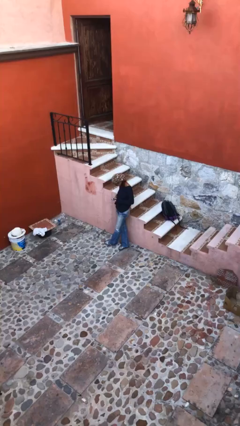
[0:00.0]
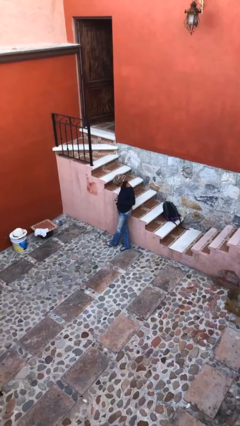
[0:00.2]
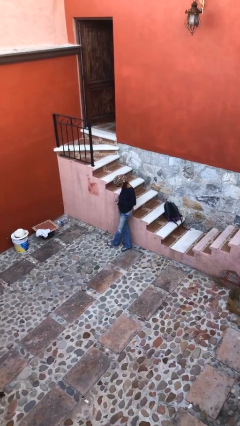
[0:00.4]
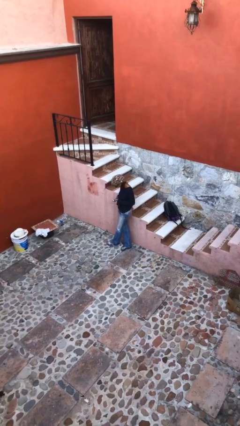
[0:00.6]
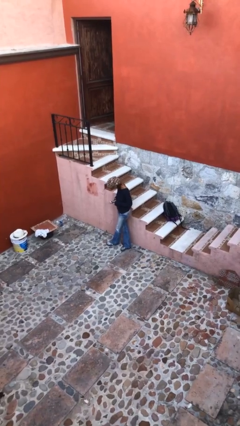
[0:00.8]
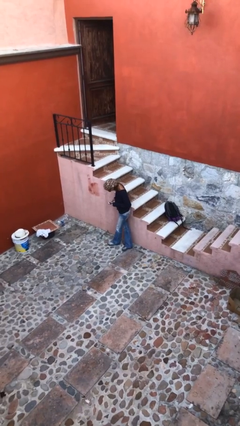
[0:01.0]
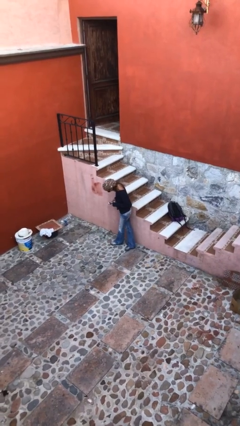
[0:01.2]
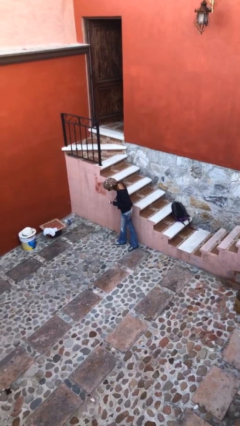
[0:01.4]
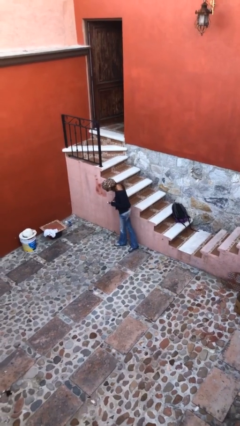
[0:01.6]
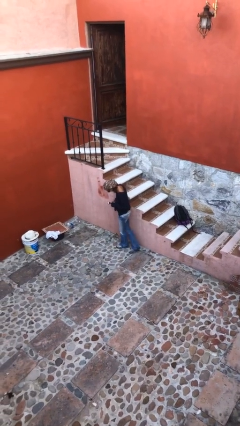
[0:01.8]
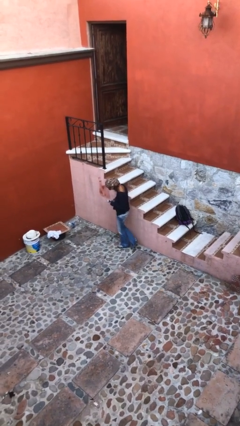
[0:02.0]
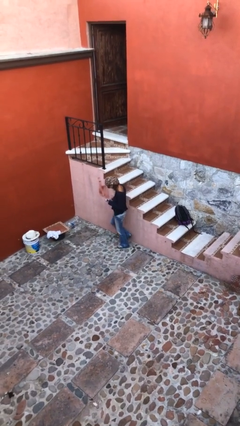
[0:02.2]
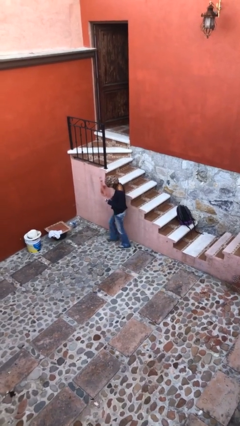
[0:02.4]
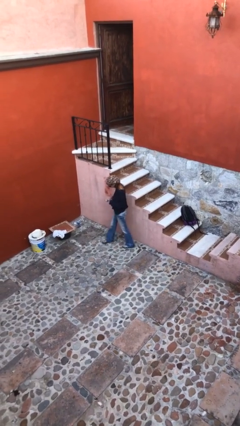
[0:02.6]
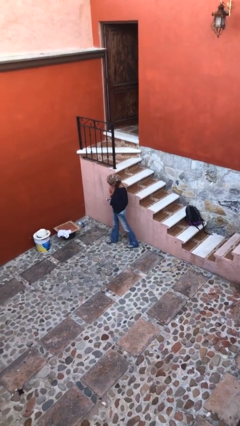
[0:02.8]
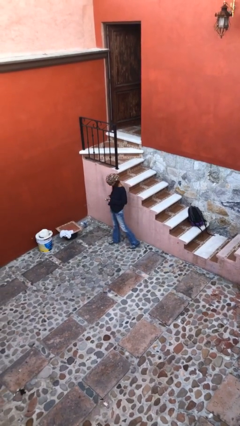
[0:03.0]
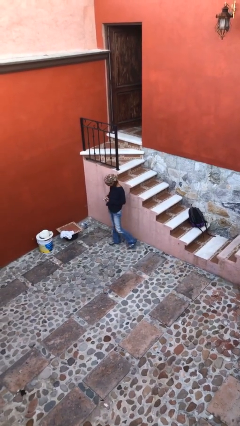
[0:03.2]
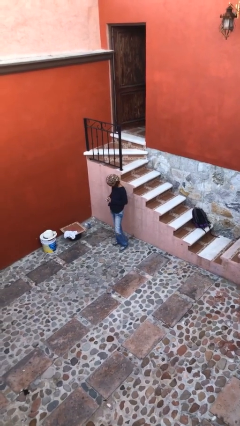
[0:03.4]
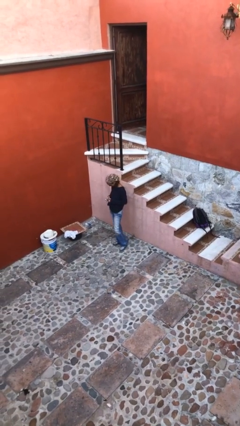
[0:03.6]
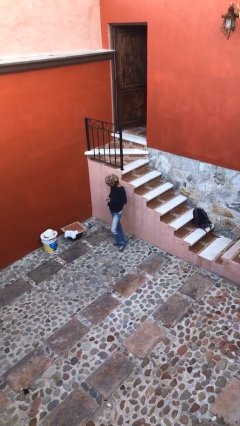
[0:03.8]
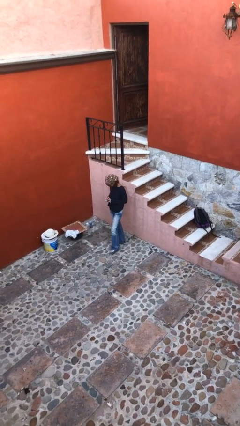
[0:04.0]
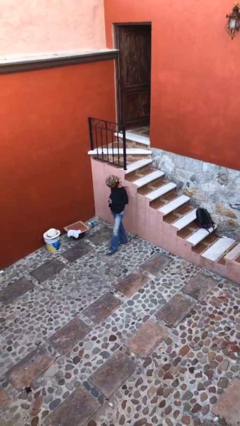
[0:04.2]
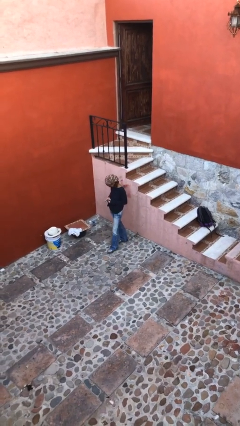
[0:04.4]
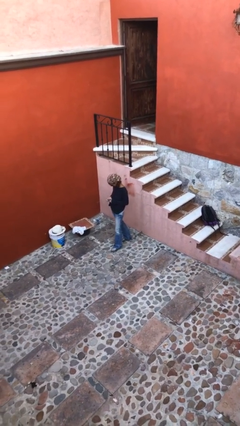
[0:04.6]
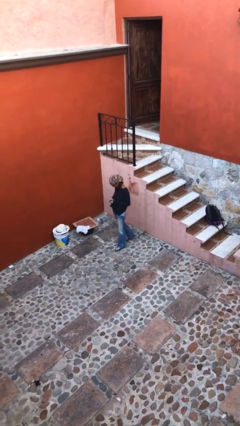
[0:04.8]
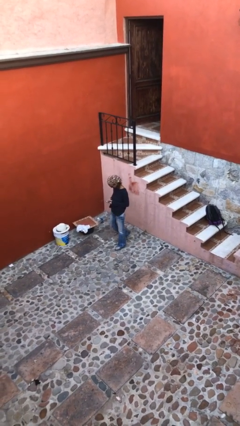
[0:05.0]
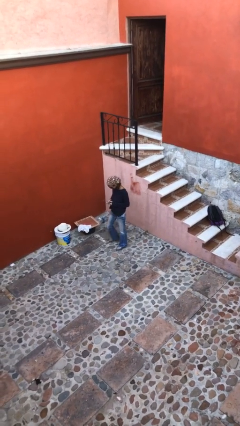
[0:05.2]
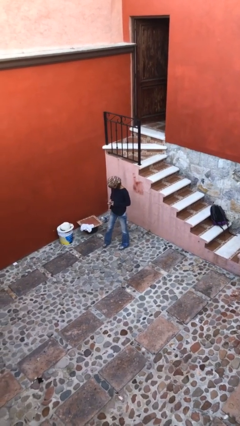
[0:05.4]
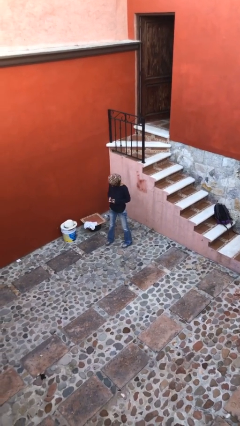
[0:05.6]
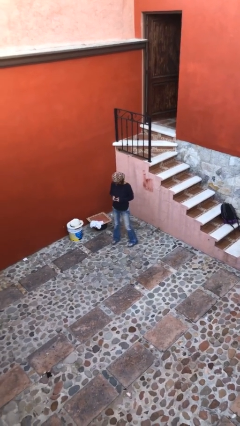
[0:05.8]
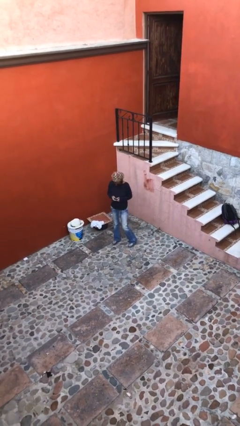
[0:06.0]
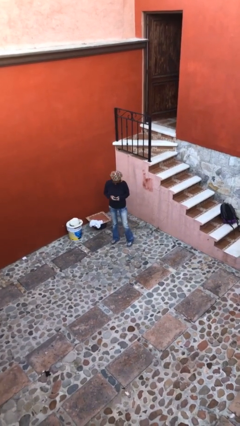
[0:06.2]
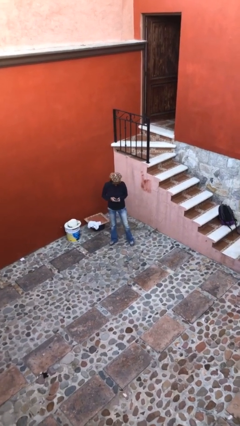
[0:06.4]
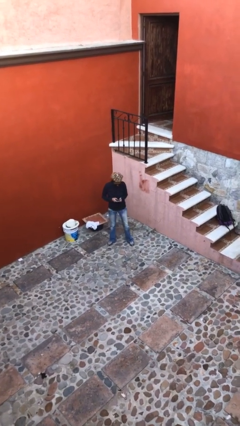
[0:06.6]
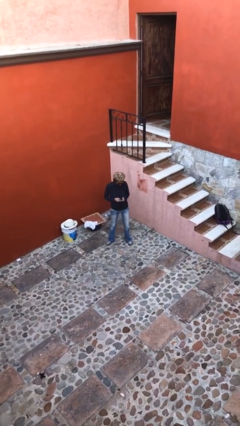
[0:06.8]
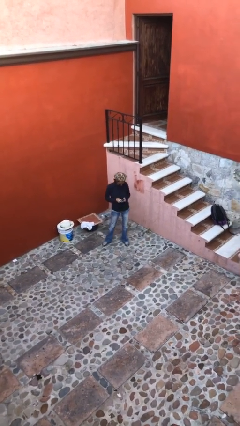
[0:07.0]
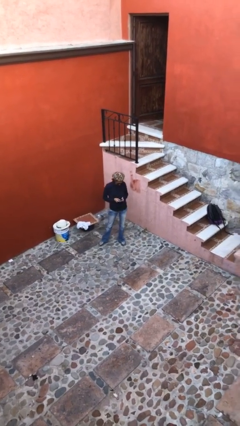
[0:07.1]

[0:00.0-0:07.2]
person texts on phone

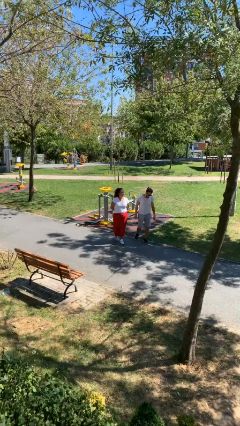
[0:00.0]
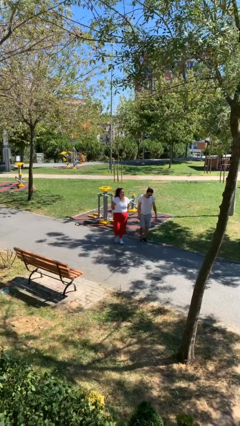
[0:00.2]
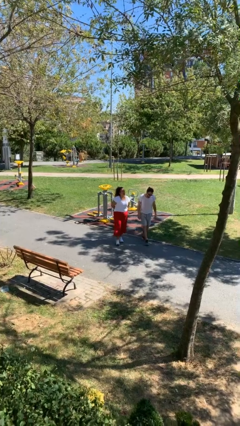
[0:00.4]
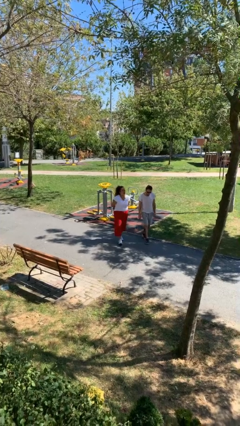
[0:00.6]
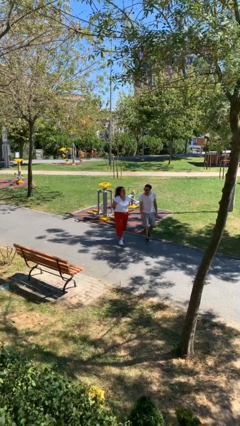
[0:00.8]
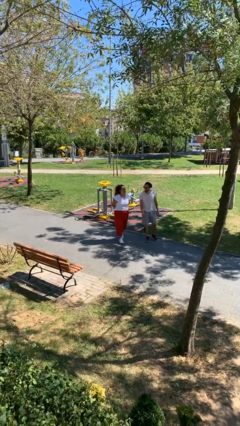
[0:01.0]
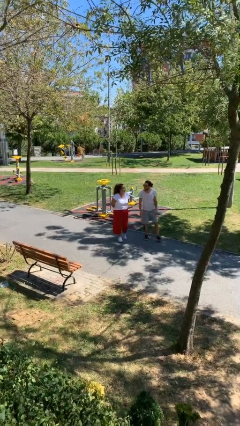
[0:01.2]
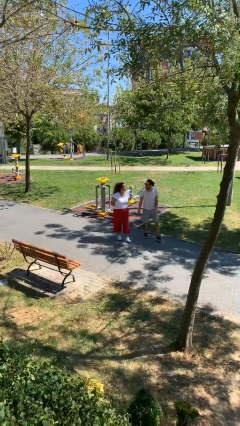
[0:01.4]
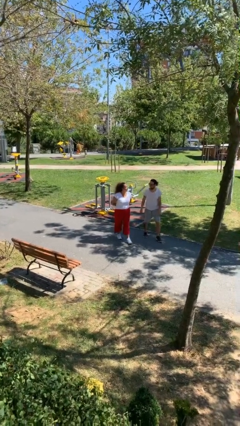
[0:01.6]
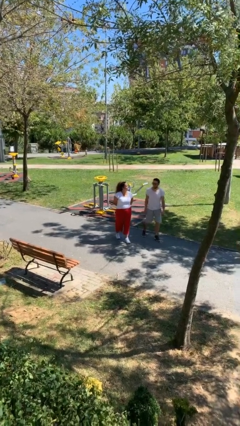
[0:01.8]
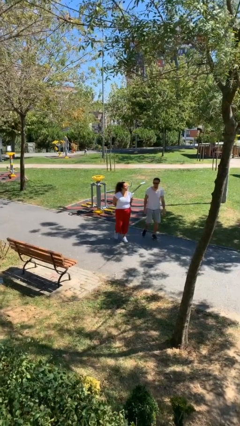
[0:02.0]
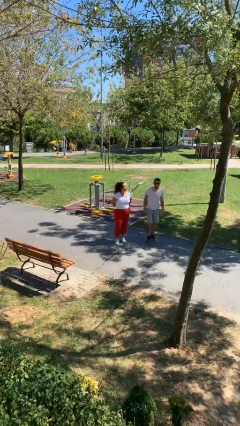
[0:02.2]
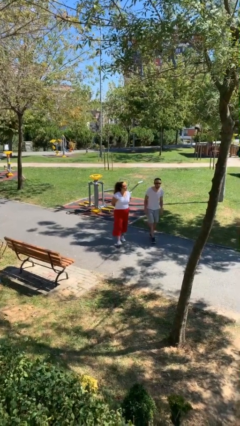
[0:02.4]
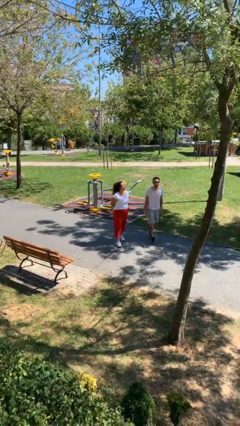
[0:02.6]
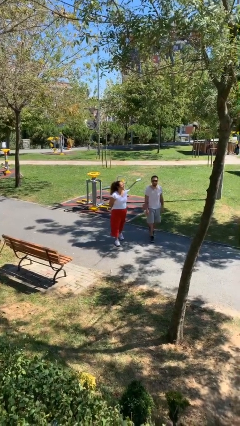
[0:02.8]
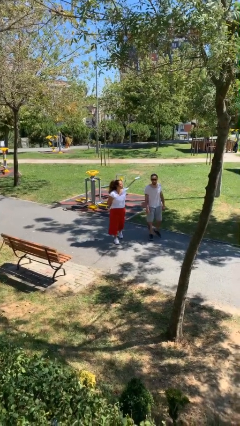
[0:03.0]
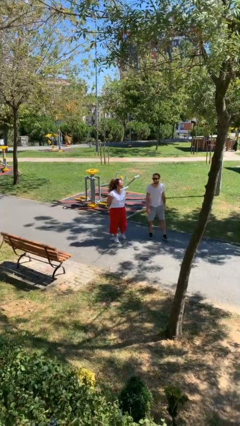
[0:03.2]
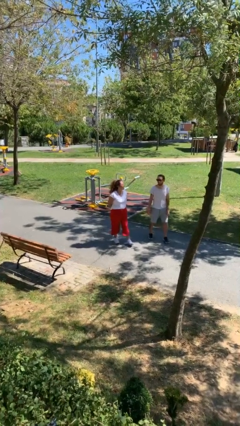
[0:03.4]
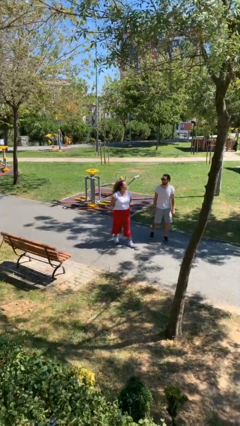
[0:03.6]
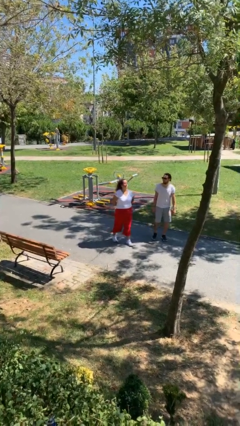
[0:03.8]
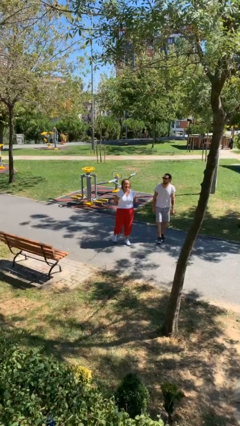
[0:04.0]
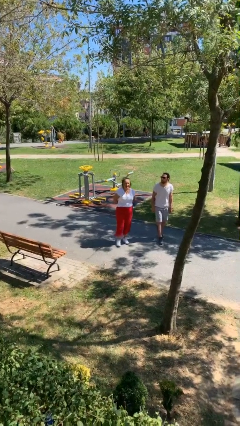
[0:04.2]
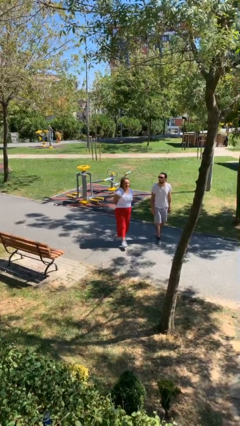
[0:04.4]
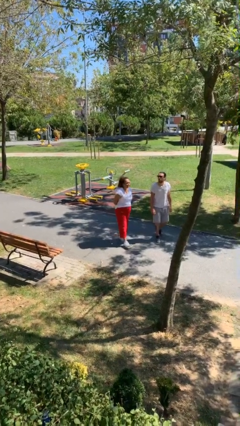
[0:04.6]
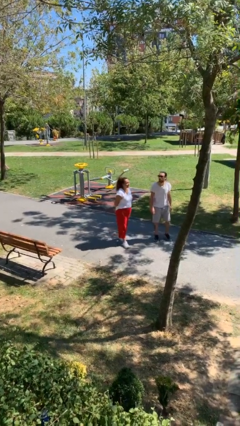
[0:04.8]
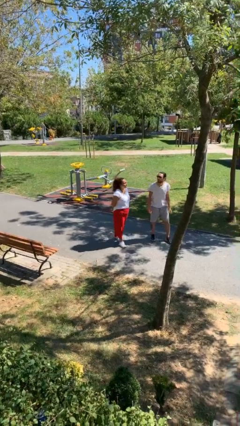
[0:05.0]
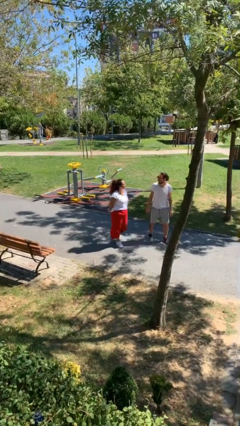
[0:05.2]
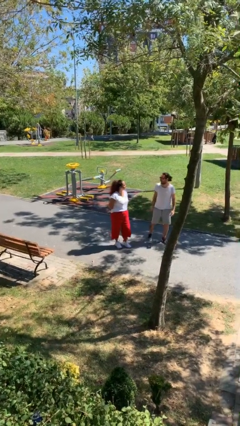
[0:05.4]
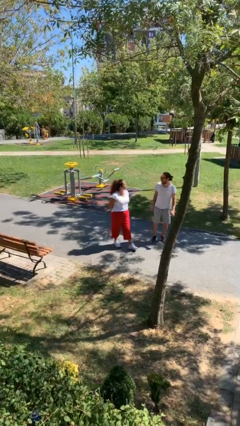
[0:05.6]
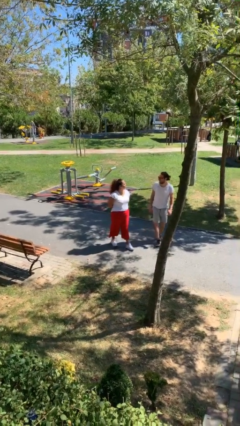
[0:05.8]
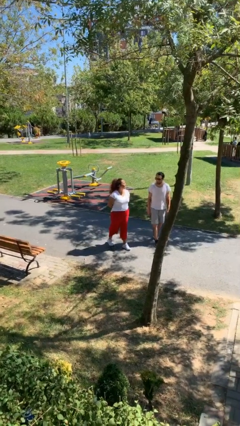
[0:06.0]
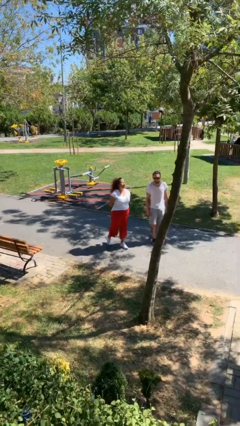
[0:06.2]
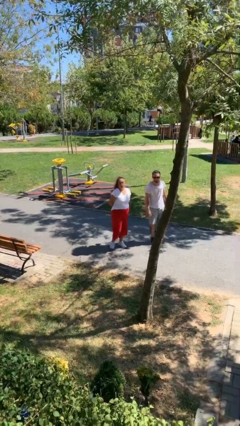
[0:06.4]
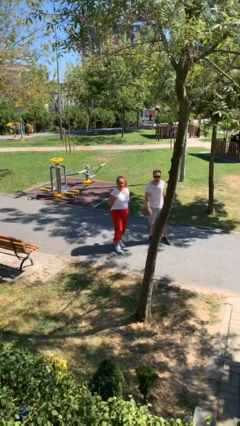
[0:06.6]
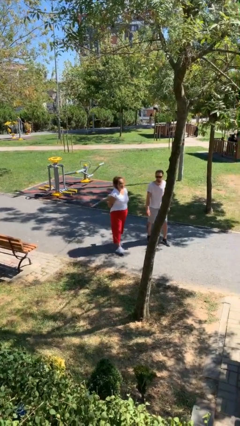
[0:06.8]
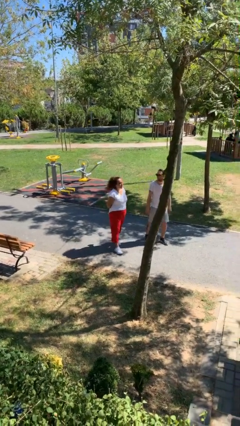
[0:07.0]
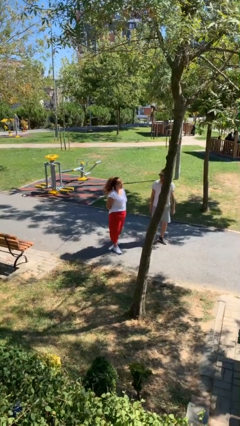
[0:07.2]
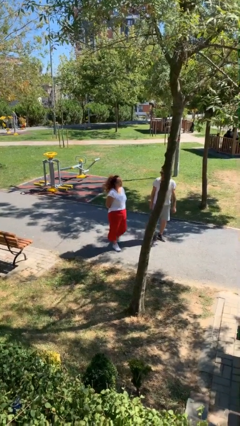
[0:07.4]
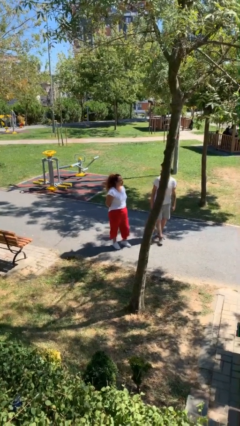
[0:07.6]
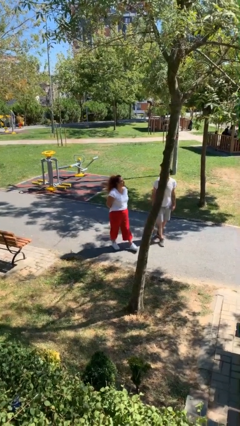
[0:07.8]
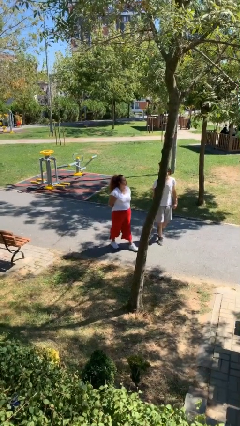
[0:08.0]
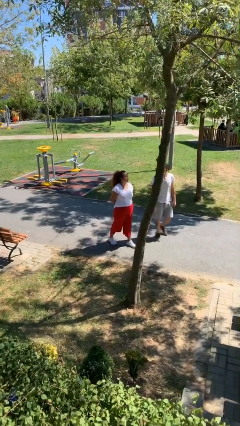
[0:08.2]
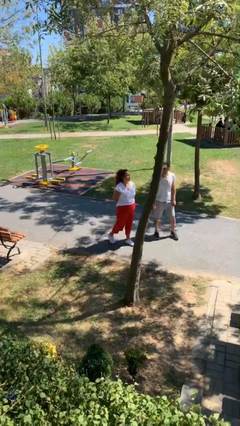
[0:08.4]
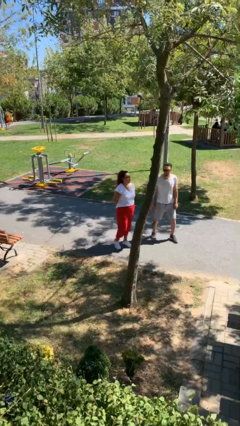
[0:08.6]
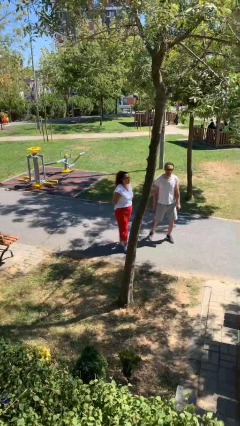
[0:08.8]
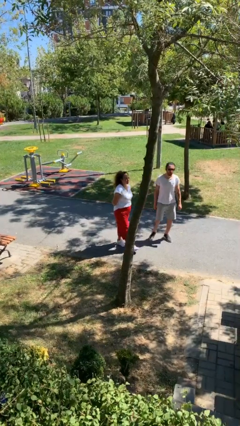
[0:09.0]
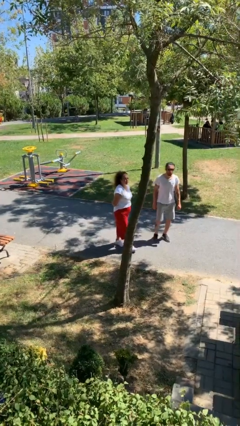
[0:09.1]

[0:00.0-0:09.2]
person talks to person

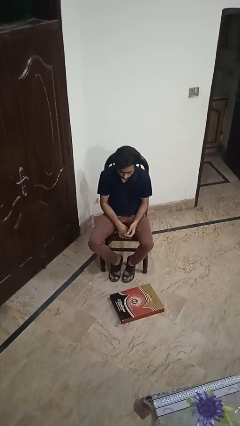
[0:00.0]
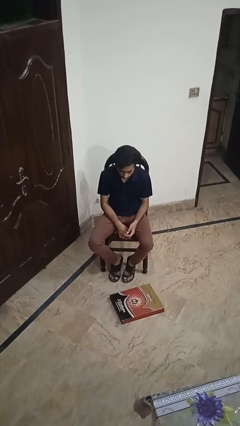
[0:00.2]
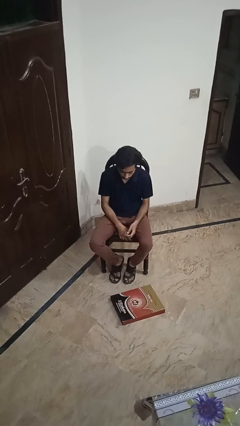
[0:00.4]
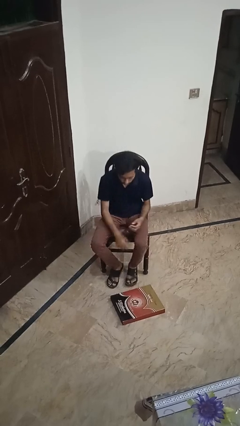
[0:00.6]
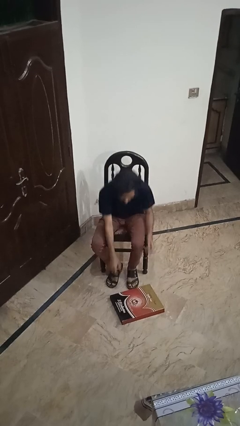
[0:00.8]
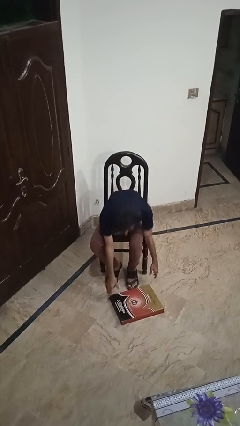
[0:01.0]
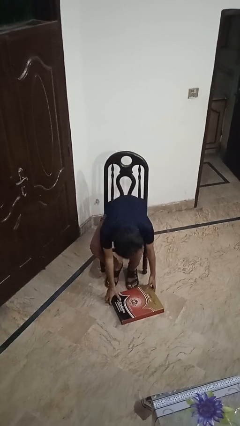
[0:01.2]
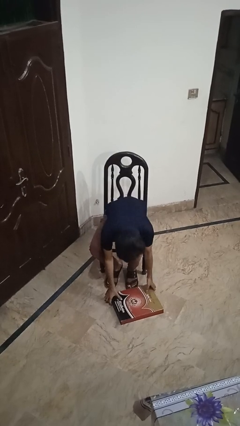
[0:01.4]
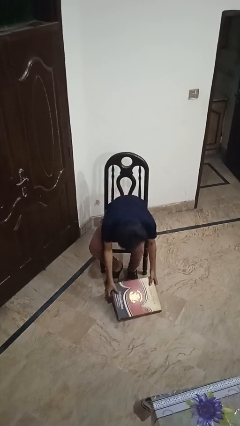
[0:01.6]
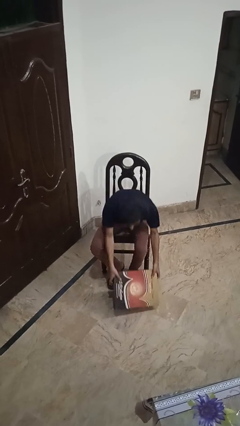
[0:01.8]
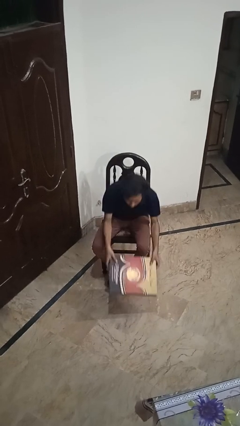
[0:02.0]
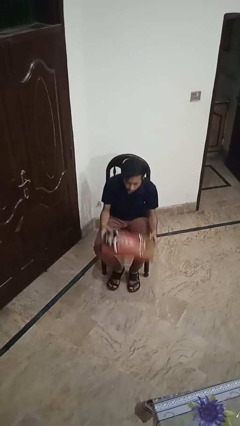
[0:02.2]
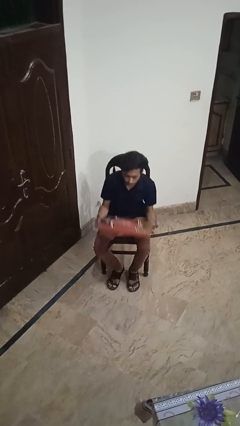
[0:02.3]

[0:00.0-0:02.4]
person picks up object from floor
